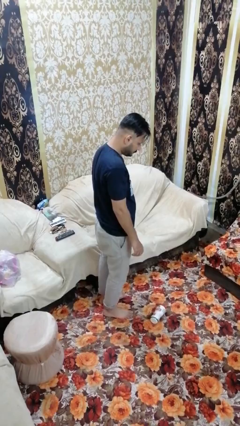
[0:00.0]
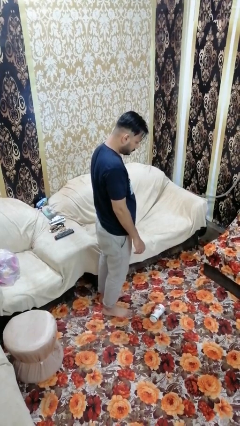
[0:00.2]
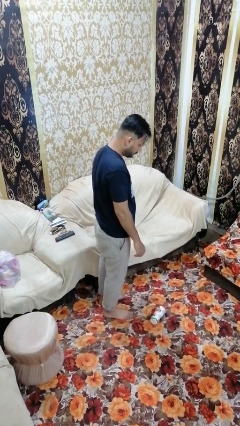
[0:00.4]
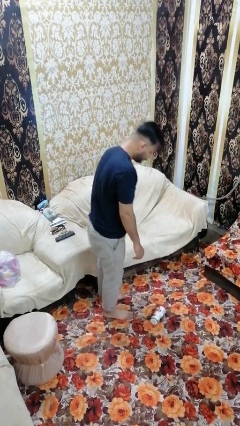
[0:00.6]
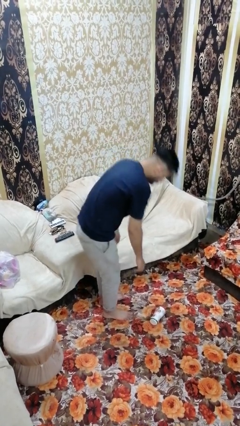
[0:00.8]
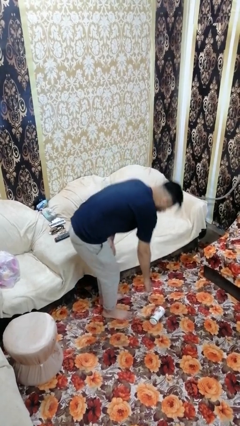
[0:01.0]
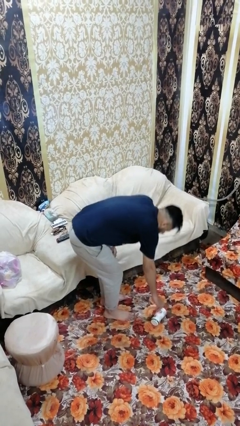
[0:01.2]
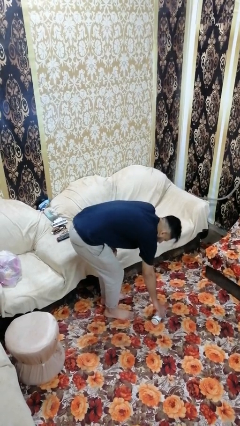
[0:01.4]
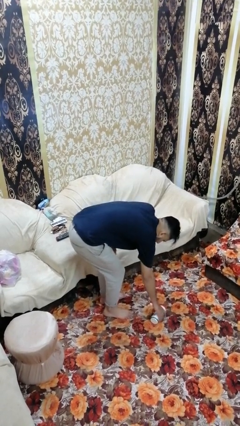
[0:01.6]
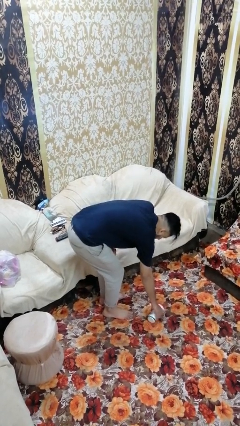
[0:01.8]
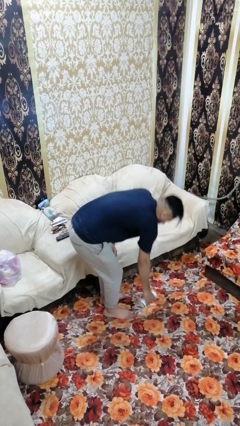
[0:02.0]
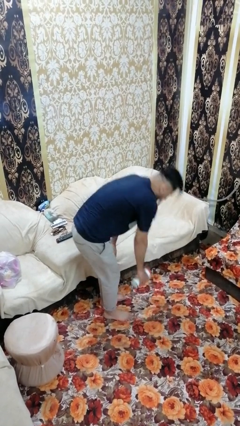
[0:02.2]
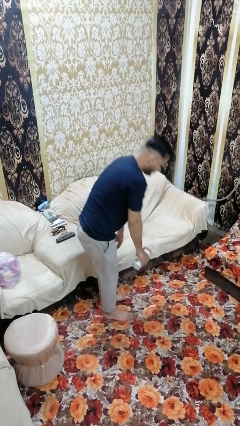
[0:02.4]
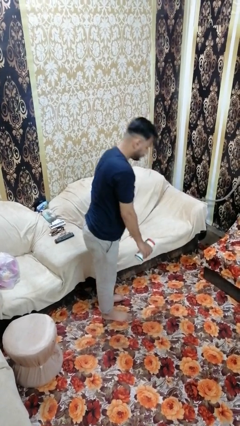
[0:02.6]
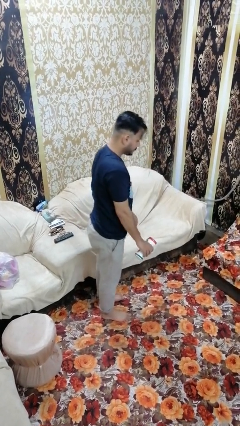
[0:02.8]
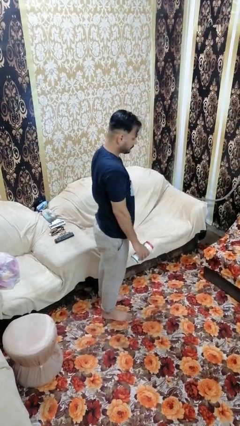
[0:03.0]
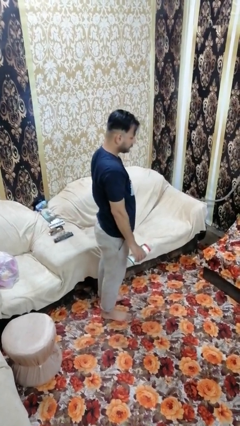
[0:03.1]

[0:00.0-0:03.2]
person picks up object from floor

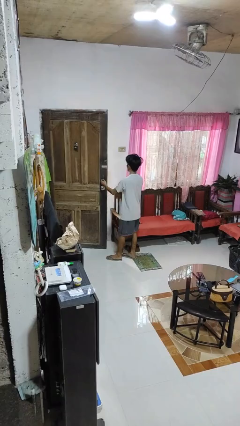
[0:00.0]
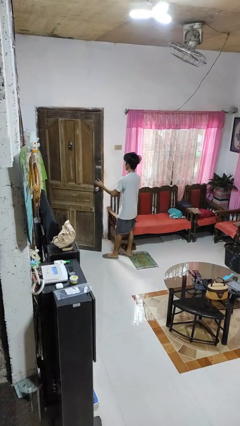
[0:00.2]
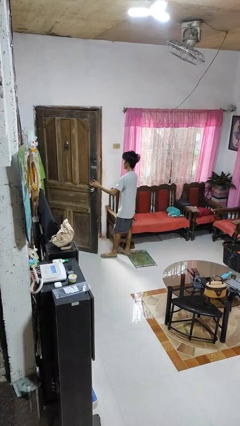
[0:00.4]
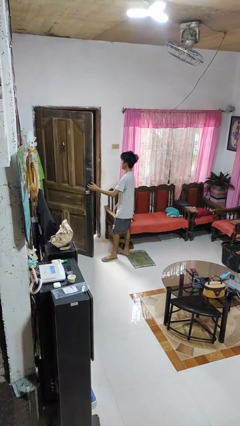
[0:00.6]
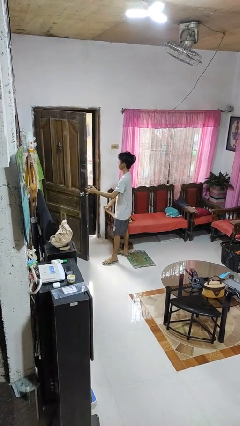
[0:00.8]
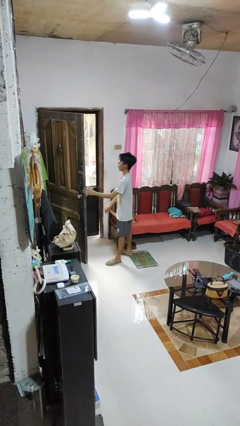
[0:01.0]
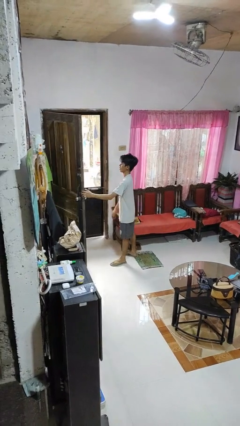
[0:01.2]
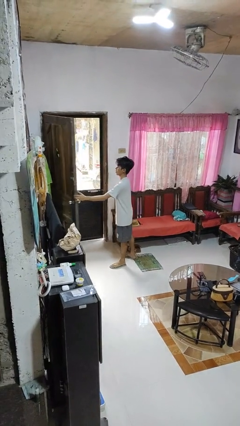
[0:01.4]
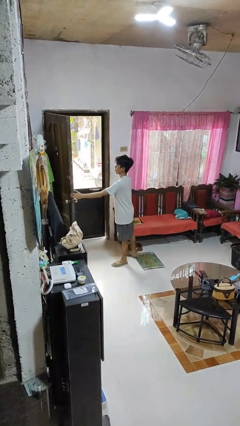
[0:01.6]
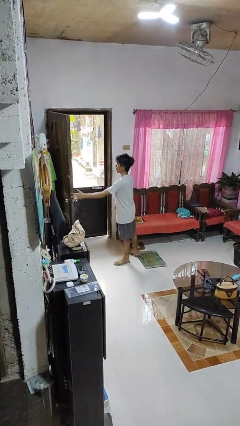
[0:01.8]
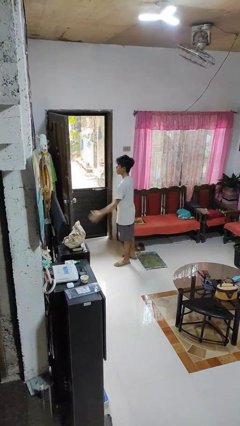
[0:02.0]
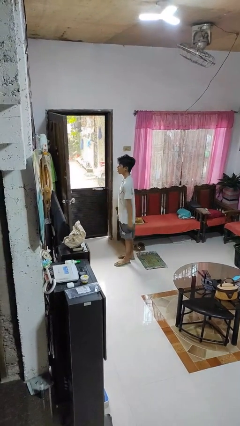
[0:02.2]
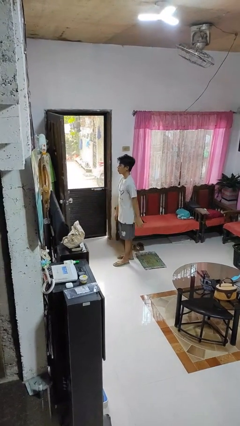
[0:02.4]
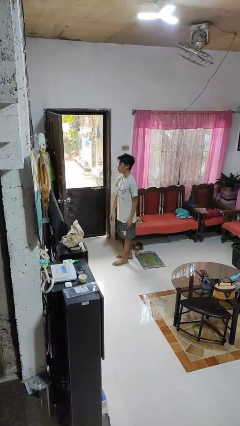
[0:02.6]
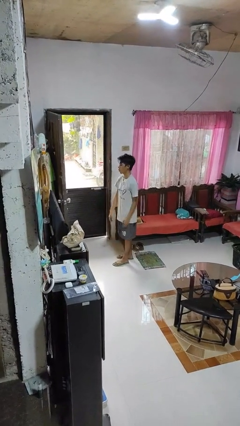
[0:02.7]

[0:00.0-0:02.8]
person opens facility door

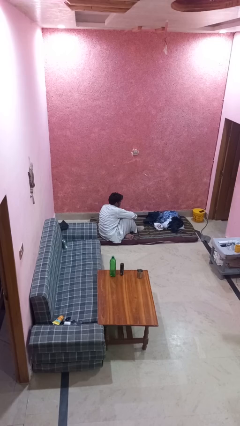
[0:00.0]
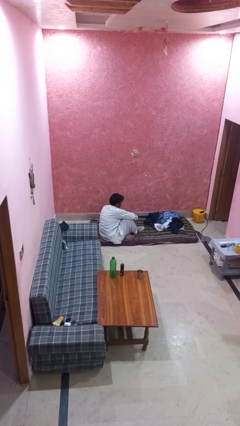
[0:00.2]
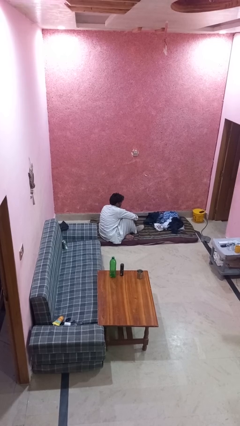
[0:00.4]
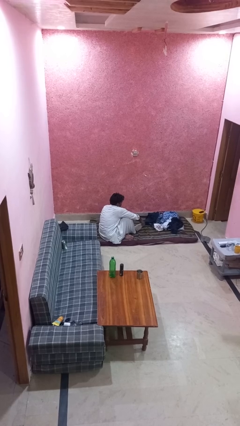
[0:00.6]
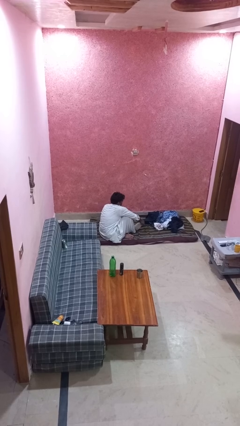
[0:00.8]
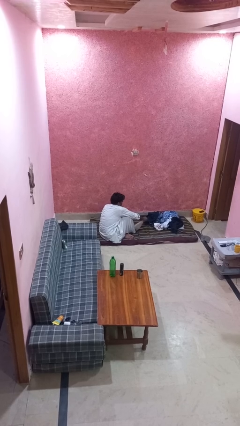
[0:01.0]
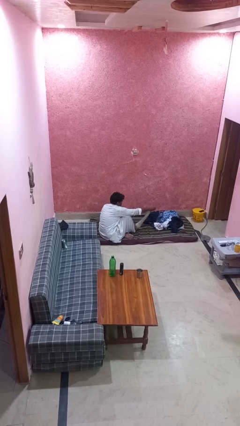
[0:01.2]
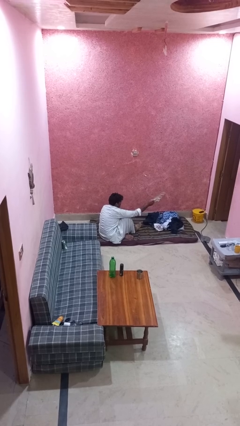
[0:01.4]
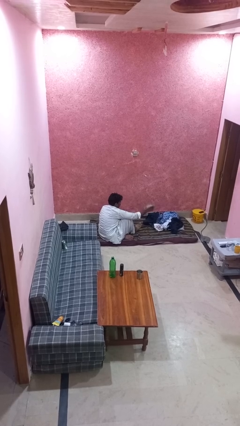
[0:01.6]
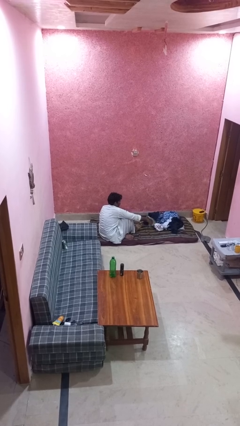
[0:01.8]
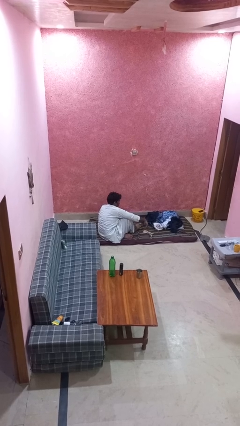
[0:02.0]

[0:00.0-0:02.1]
person takes off socks

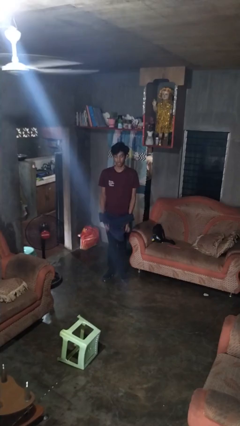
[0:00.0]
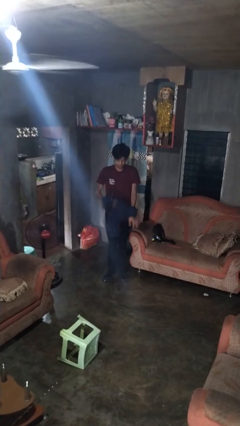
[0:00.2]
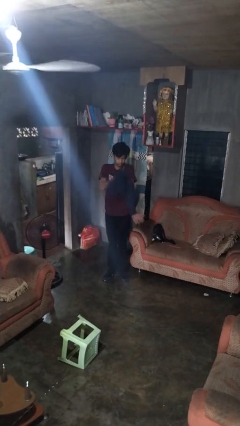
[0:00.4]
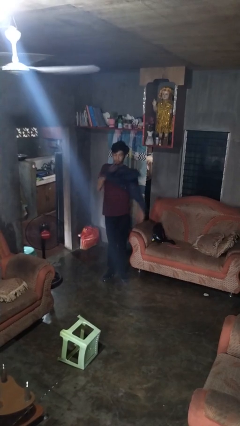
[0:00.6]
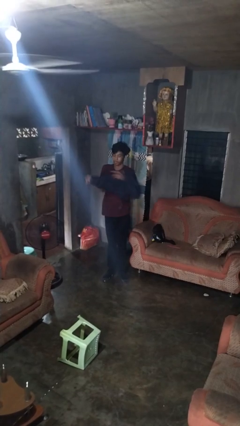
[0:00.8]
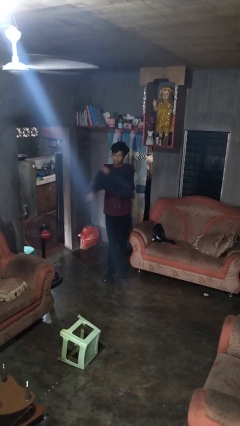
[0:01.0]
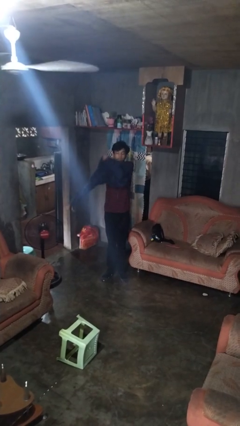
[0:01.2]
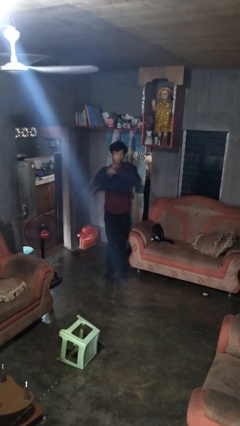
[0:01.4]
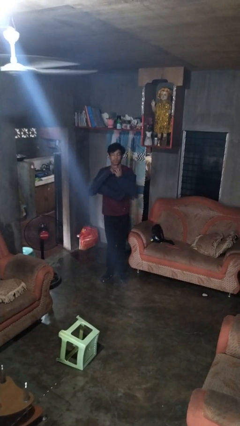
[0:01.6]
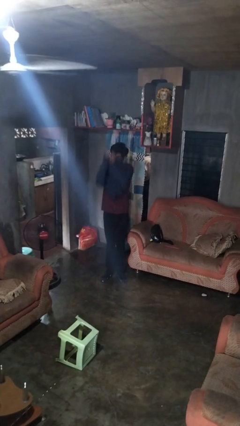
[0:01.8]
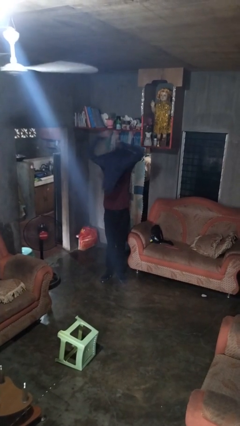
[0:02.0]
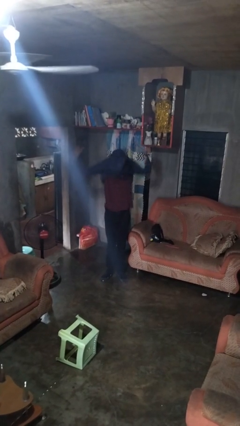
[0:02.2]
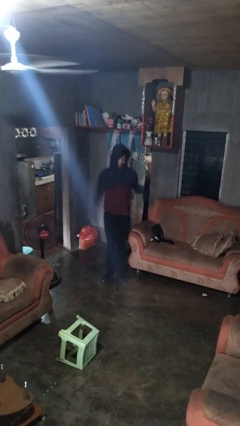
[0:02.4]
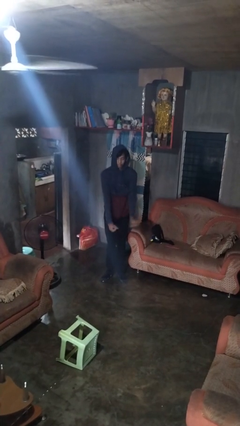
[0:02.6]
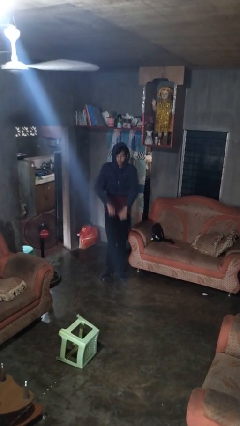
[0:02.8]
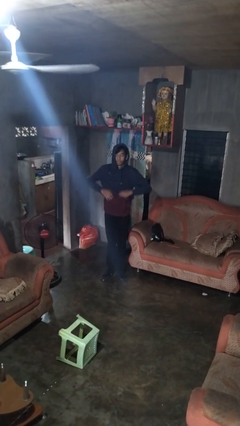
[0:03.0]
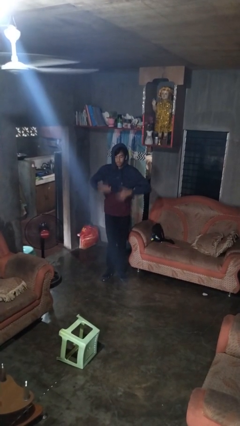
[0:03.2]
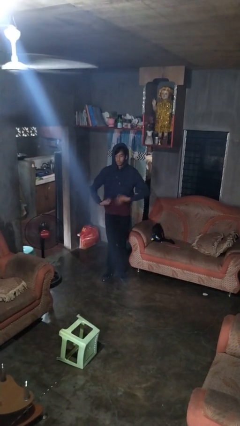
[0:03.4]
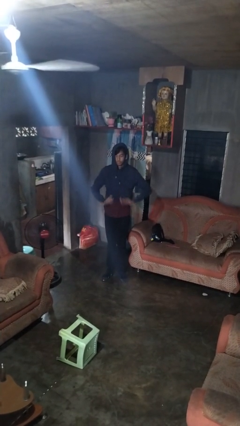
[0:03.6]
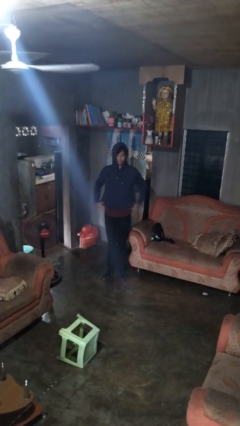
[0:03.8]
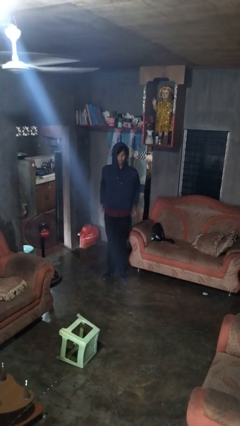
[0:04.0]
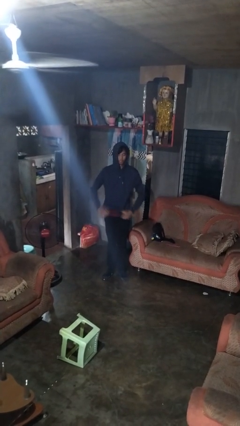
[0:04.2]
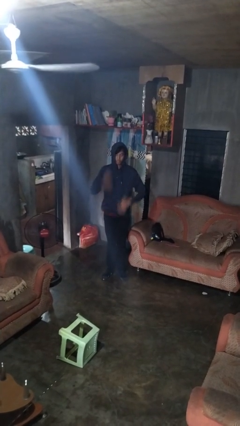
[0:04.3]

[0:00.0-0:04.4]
person puts on hoodie

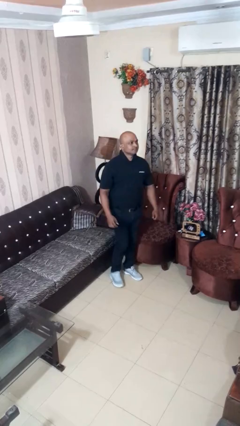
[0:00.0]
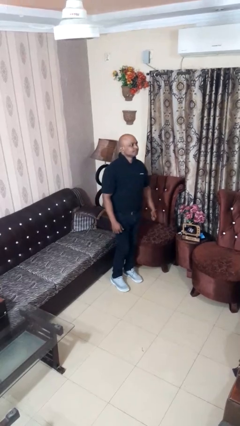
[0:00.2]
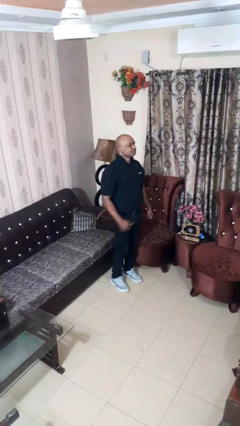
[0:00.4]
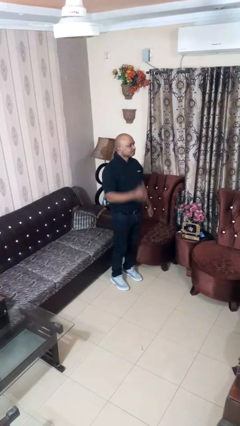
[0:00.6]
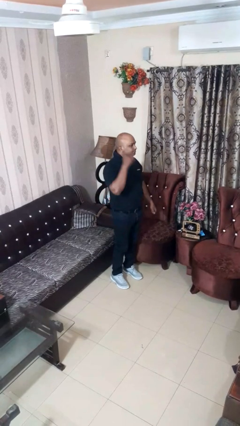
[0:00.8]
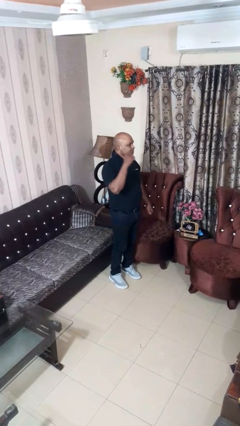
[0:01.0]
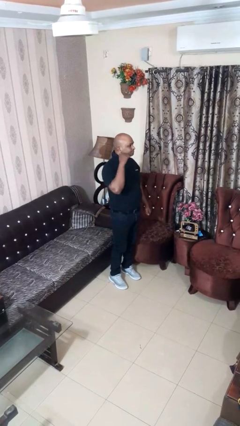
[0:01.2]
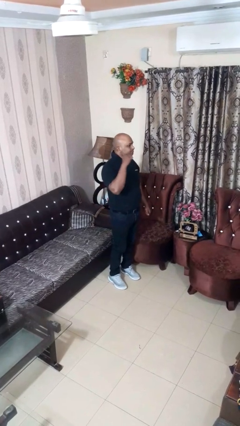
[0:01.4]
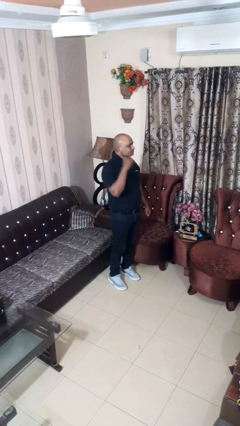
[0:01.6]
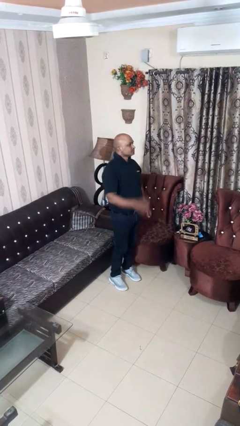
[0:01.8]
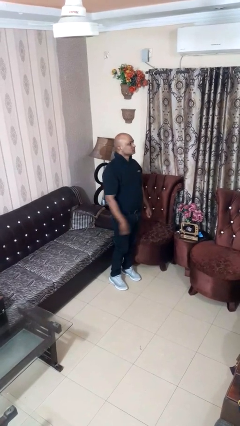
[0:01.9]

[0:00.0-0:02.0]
person gestures behind me

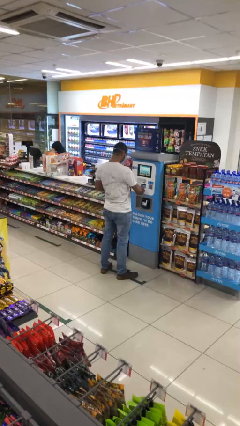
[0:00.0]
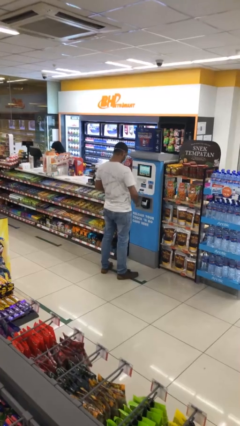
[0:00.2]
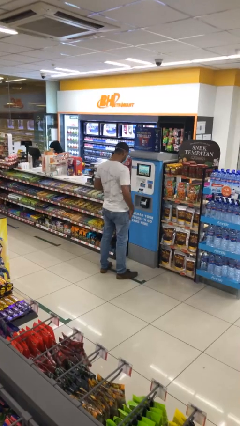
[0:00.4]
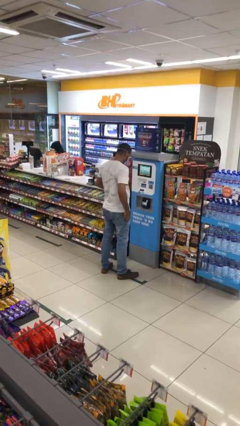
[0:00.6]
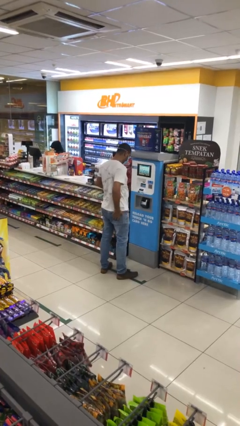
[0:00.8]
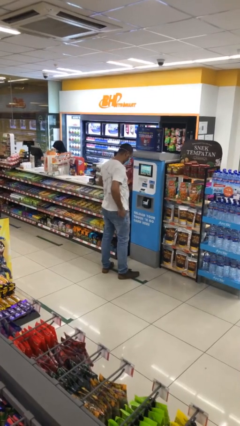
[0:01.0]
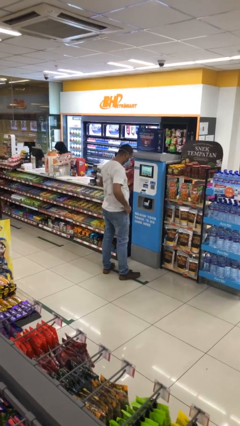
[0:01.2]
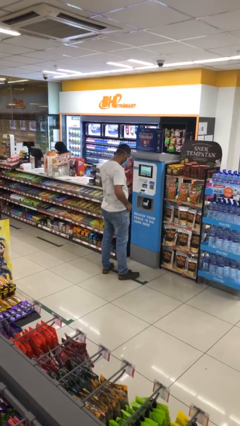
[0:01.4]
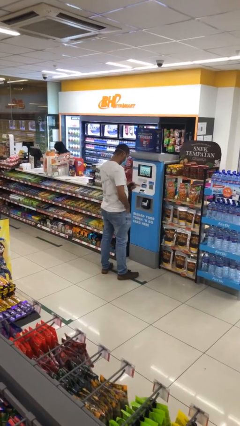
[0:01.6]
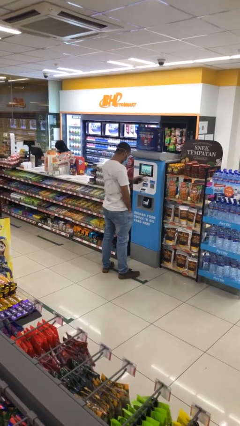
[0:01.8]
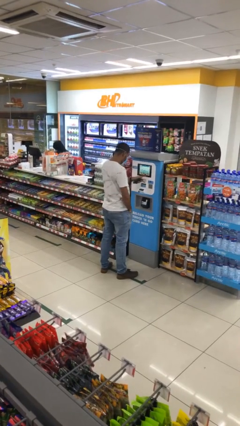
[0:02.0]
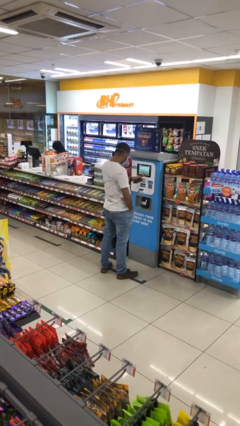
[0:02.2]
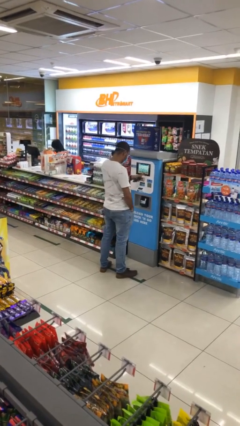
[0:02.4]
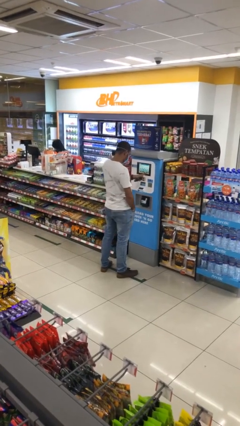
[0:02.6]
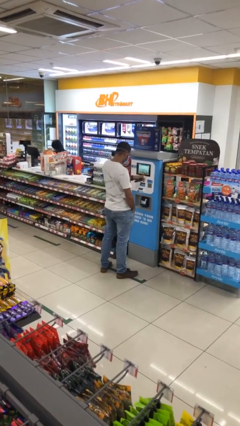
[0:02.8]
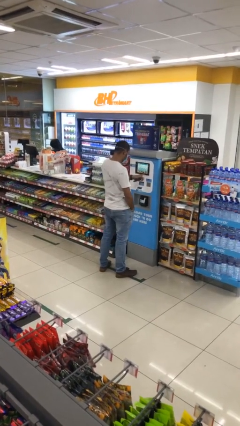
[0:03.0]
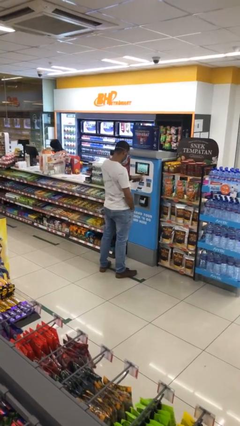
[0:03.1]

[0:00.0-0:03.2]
person purchases from machine
